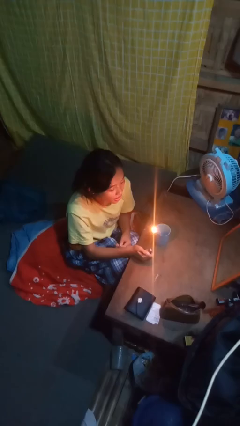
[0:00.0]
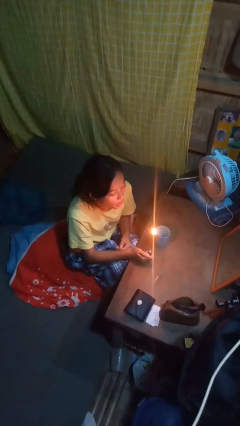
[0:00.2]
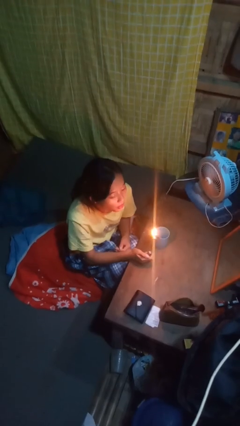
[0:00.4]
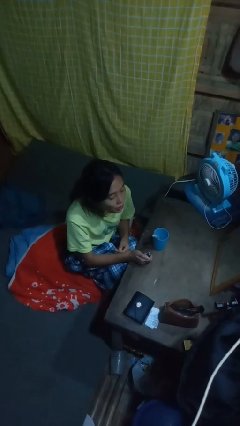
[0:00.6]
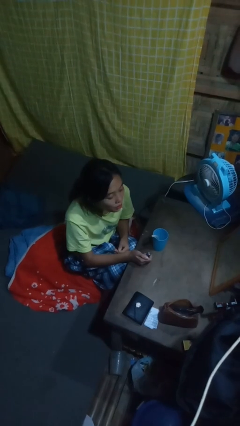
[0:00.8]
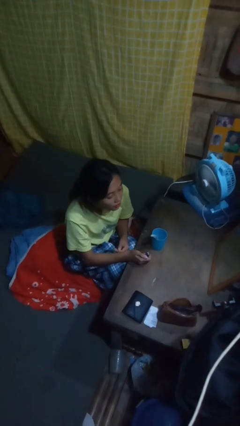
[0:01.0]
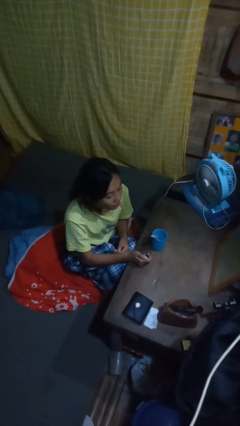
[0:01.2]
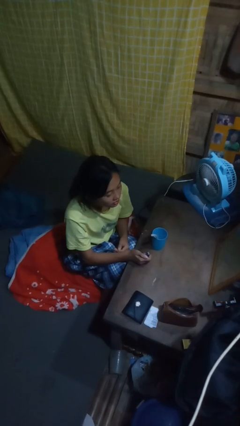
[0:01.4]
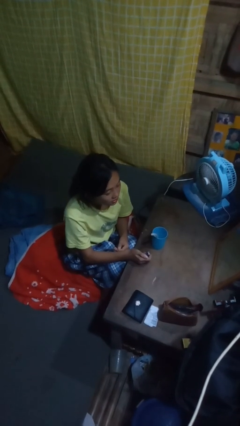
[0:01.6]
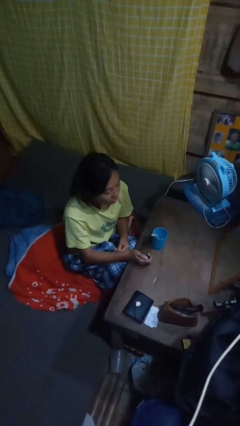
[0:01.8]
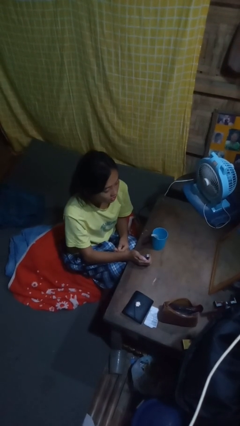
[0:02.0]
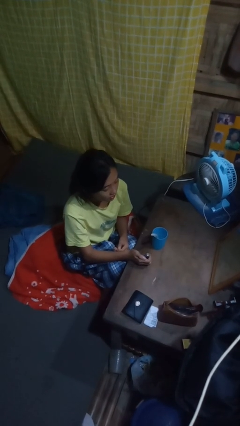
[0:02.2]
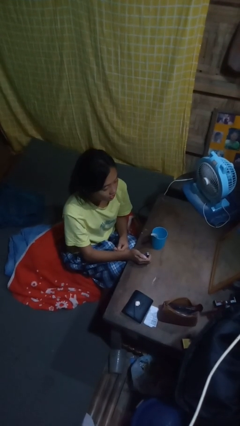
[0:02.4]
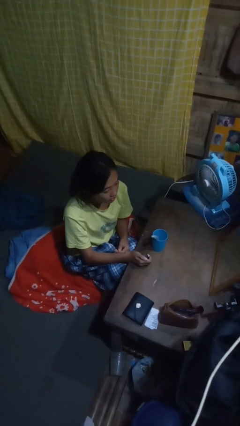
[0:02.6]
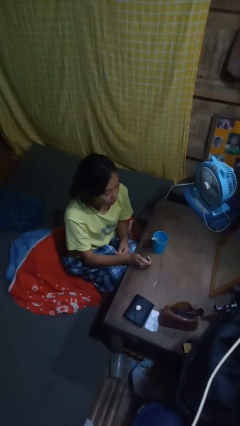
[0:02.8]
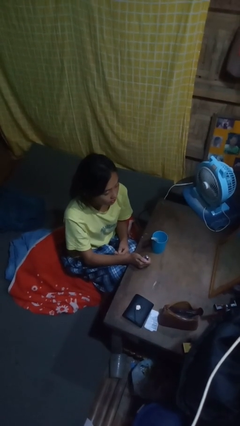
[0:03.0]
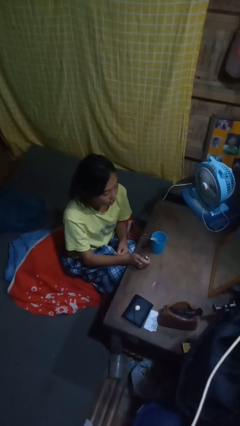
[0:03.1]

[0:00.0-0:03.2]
person extinguishes candle

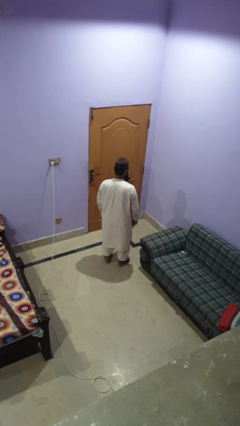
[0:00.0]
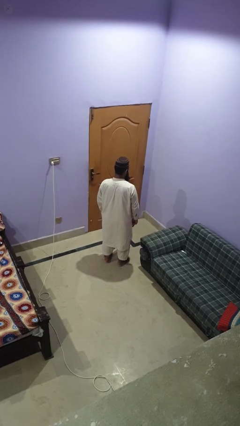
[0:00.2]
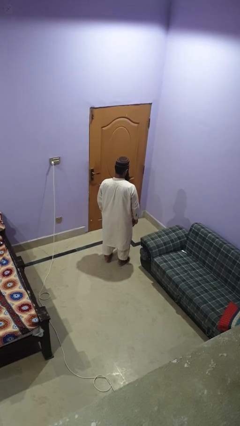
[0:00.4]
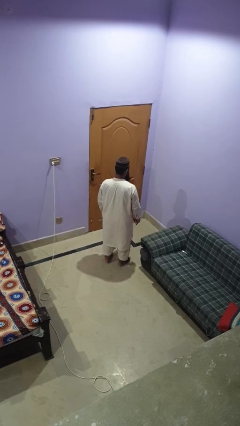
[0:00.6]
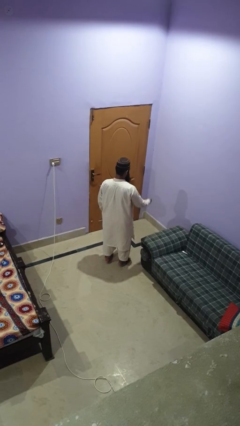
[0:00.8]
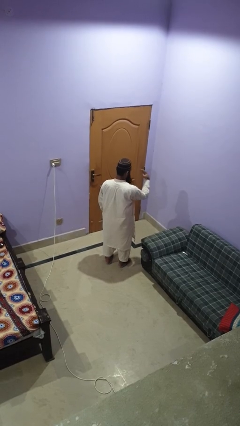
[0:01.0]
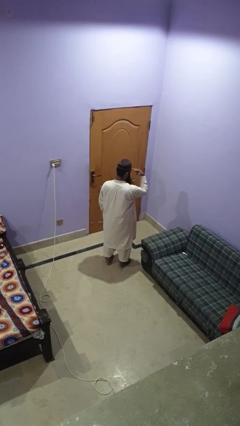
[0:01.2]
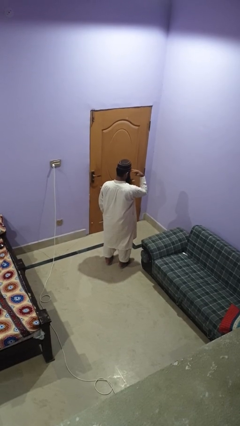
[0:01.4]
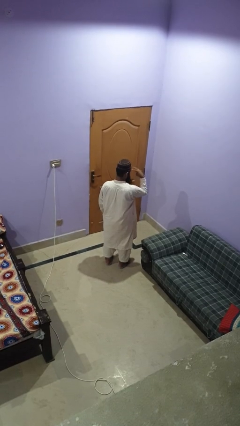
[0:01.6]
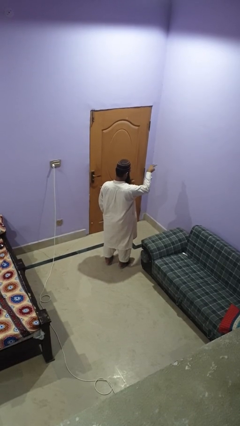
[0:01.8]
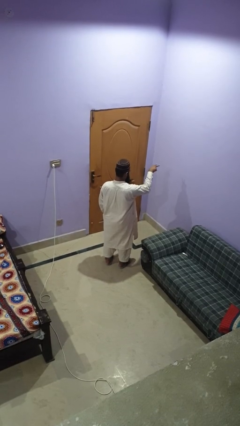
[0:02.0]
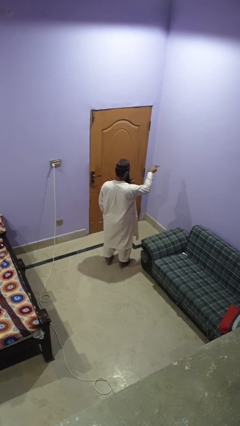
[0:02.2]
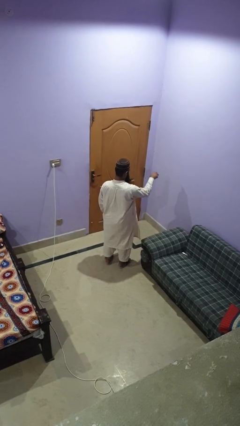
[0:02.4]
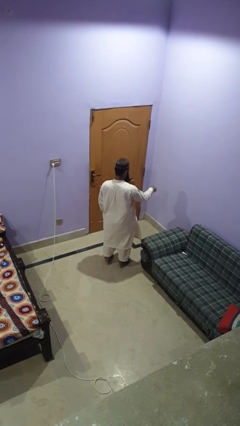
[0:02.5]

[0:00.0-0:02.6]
person gestures watch closely

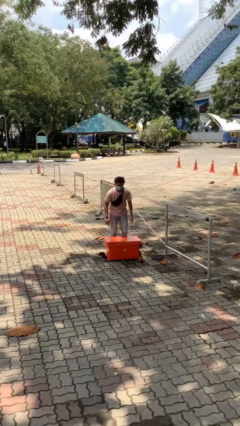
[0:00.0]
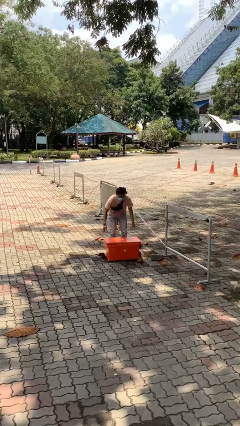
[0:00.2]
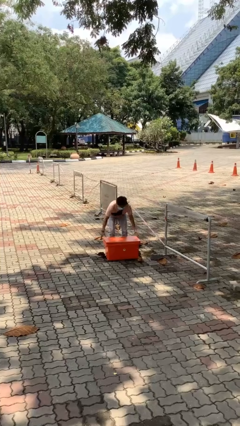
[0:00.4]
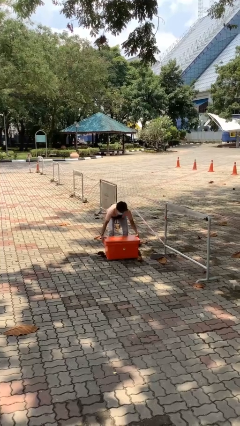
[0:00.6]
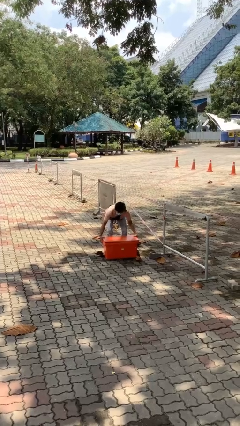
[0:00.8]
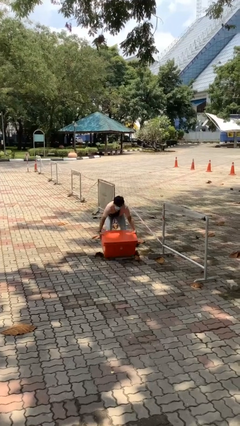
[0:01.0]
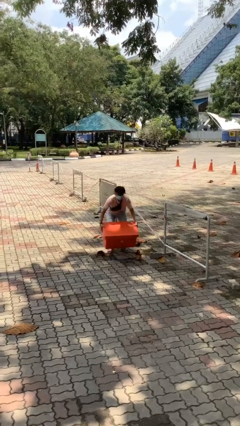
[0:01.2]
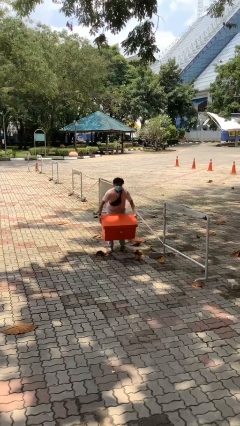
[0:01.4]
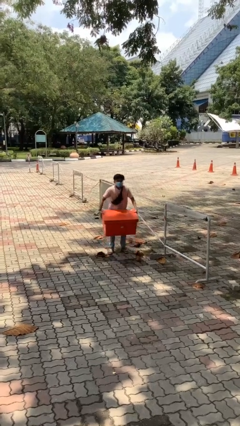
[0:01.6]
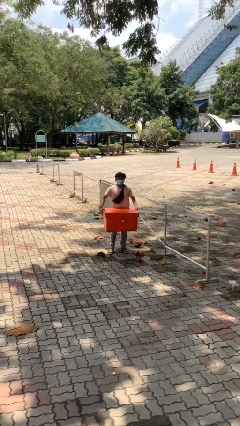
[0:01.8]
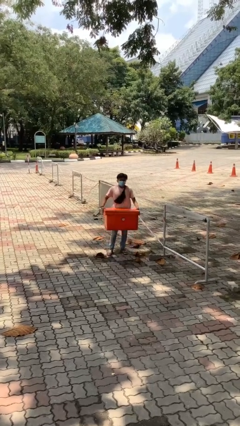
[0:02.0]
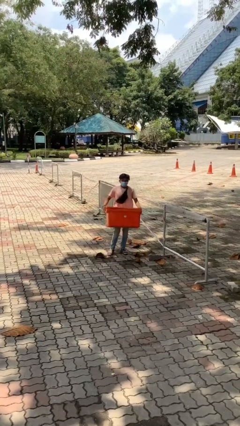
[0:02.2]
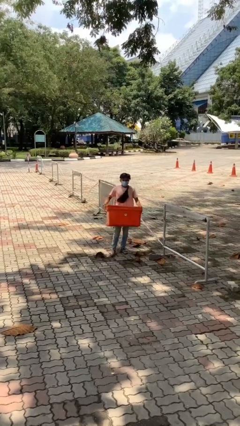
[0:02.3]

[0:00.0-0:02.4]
person picks up object from floor

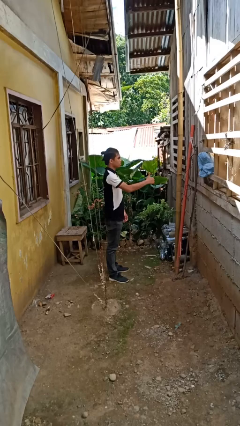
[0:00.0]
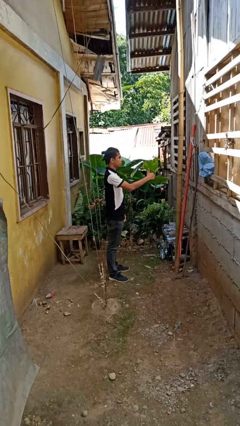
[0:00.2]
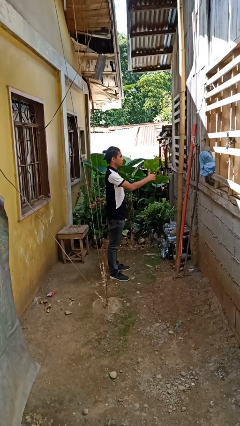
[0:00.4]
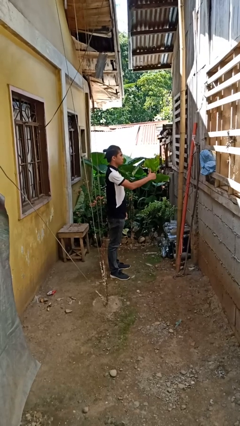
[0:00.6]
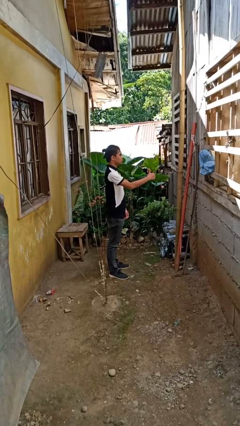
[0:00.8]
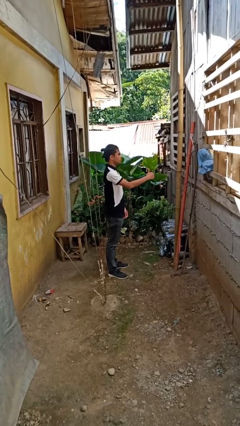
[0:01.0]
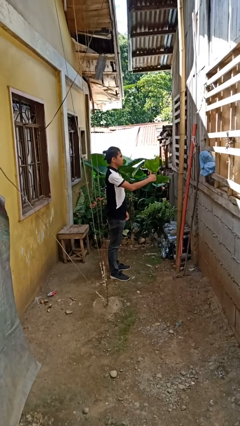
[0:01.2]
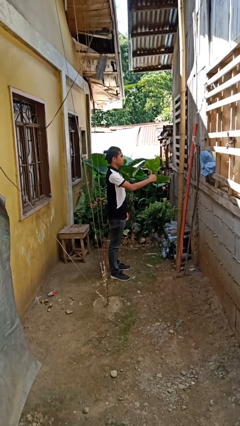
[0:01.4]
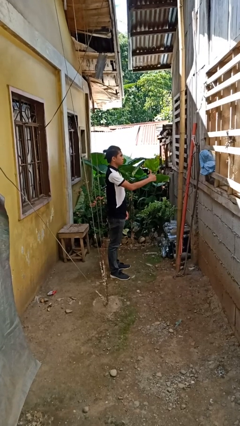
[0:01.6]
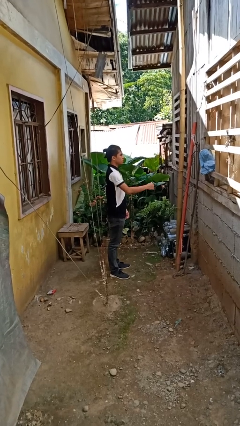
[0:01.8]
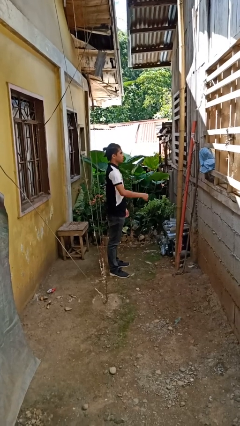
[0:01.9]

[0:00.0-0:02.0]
person gestures thumbs up

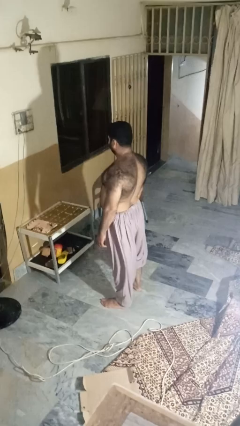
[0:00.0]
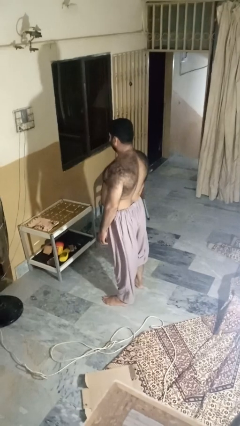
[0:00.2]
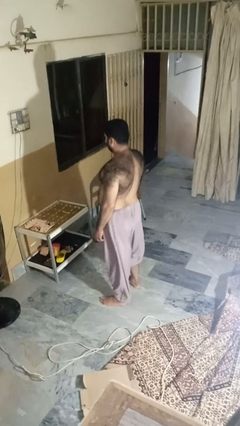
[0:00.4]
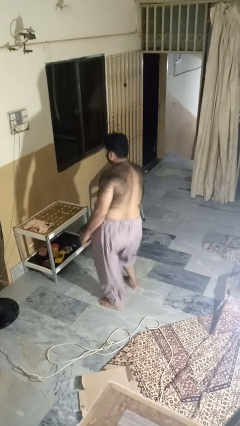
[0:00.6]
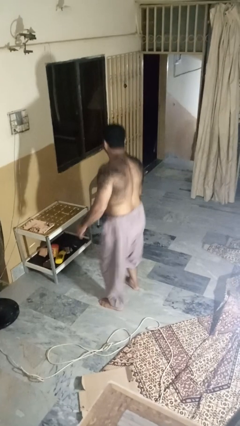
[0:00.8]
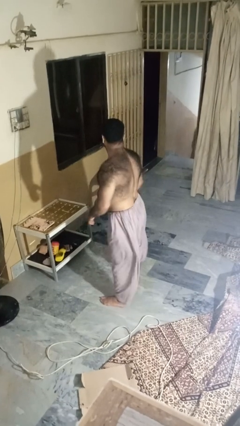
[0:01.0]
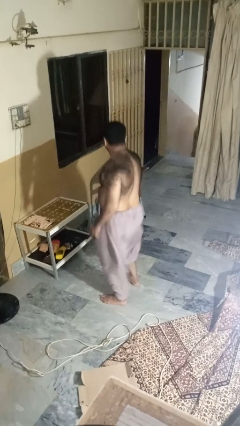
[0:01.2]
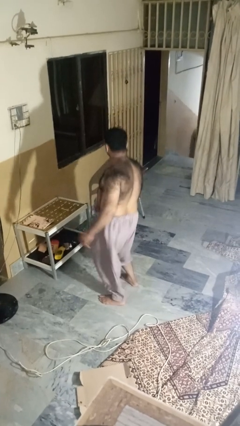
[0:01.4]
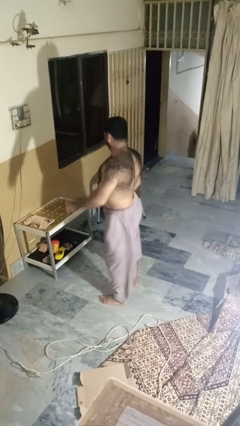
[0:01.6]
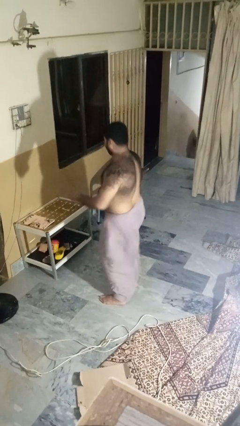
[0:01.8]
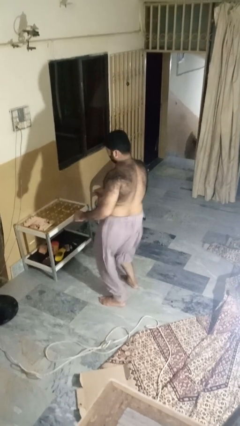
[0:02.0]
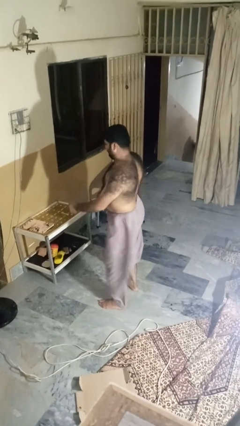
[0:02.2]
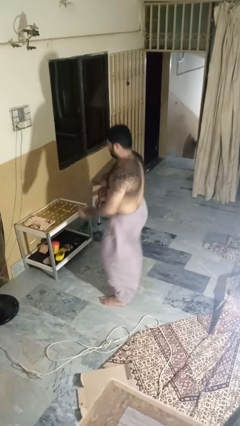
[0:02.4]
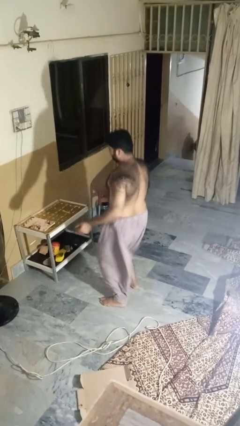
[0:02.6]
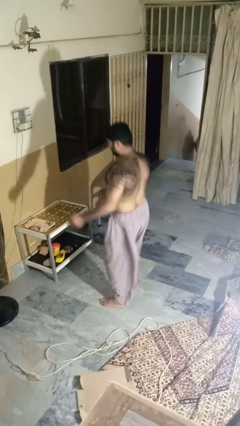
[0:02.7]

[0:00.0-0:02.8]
person dances in place

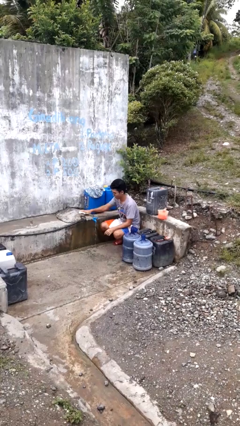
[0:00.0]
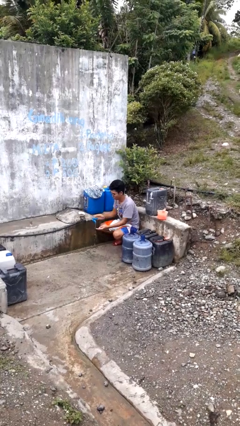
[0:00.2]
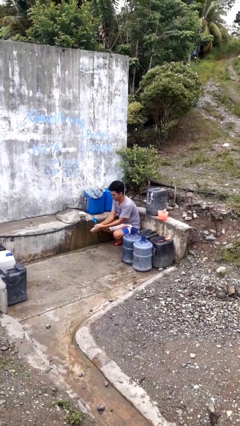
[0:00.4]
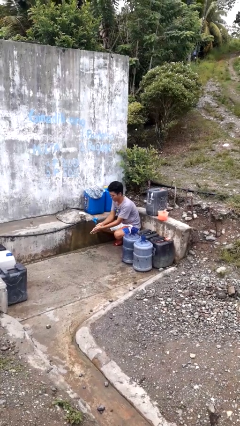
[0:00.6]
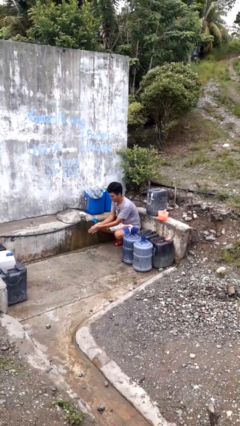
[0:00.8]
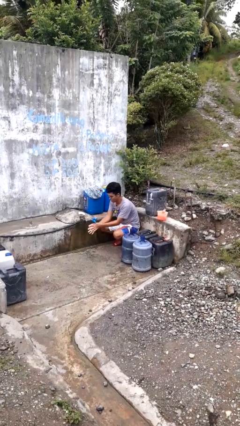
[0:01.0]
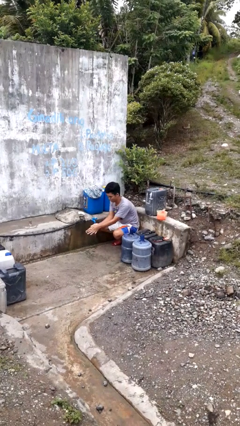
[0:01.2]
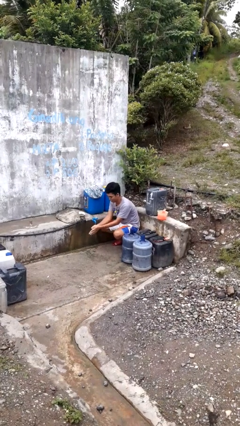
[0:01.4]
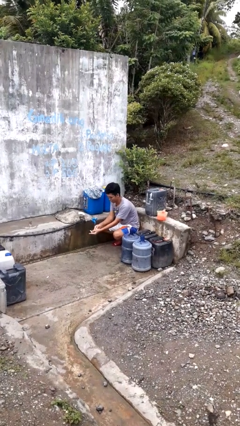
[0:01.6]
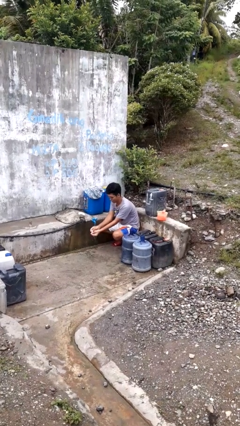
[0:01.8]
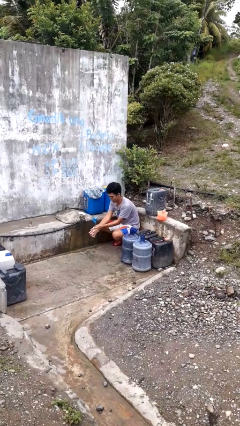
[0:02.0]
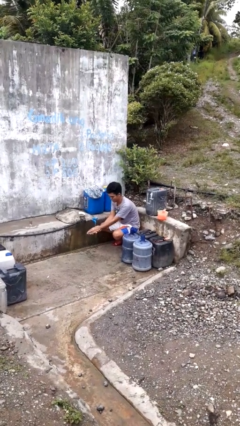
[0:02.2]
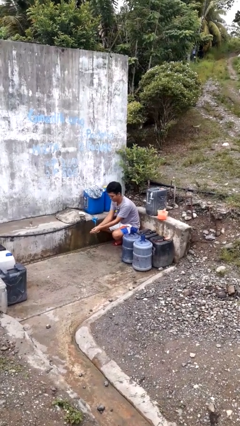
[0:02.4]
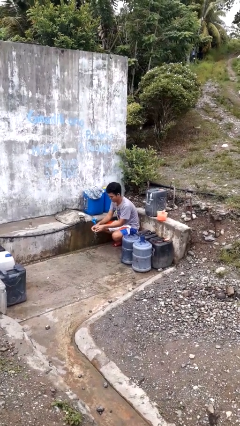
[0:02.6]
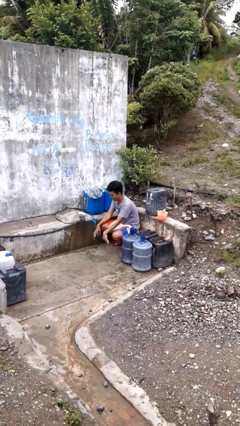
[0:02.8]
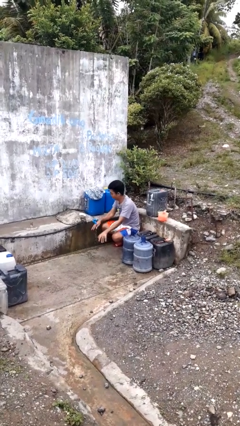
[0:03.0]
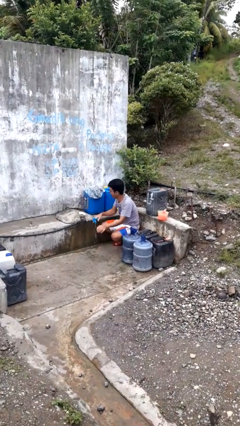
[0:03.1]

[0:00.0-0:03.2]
person washes hands

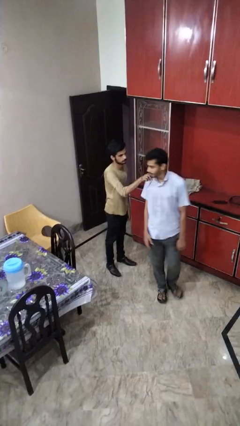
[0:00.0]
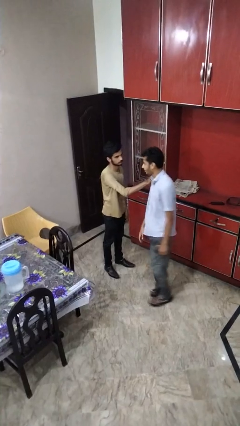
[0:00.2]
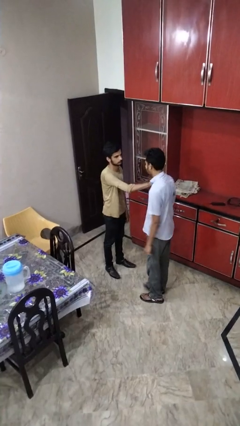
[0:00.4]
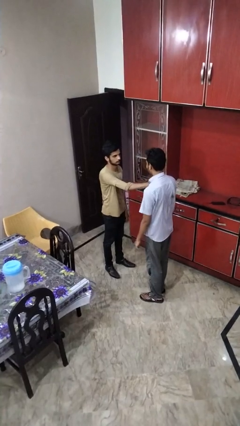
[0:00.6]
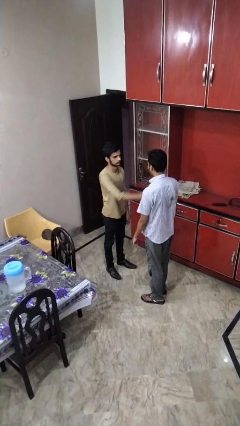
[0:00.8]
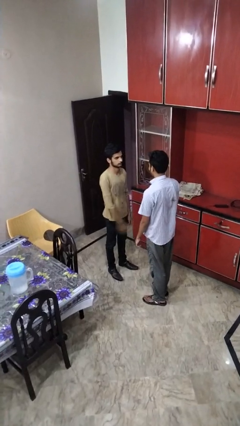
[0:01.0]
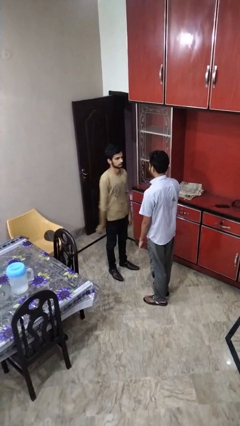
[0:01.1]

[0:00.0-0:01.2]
person spins person around
